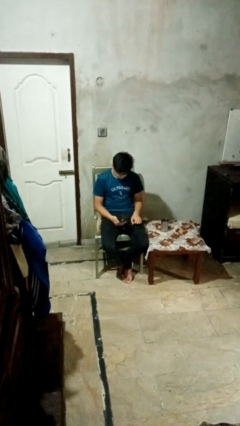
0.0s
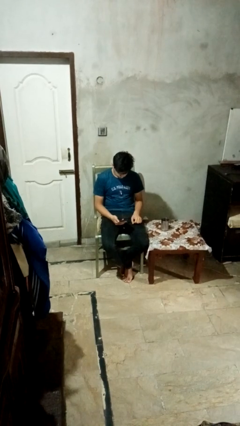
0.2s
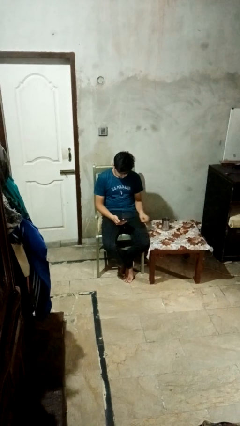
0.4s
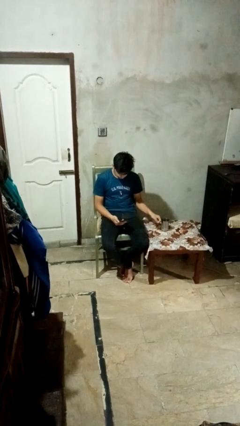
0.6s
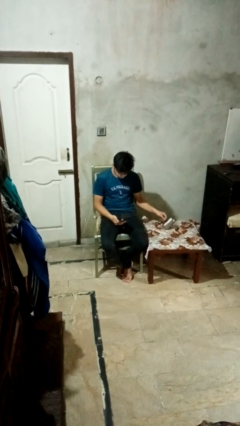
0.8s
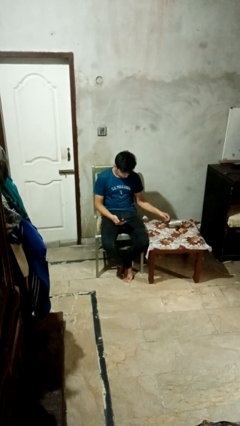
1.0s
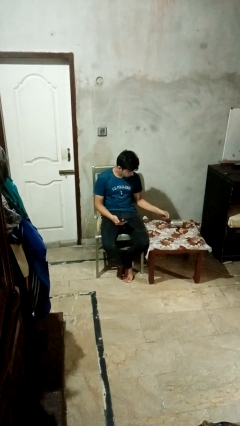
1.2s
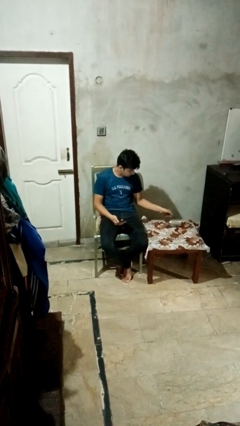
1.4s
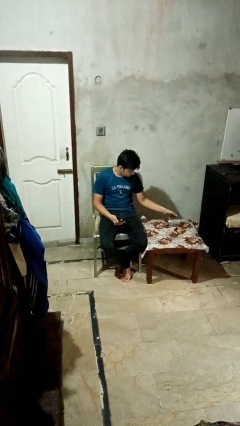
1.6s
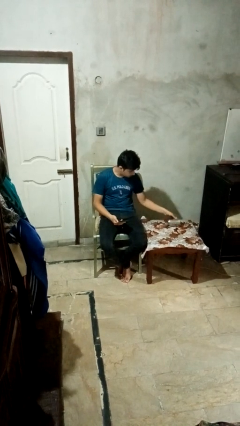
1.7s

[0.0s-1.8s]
person knocks over glass

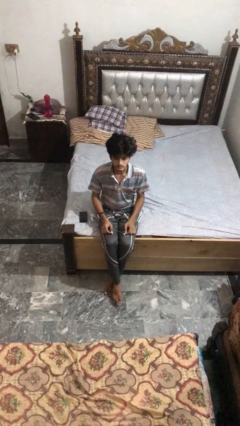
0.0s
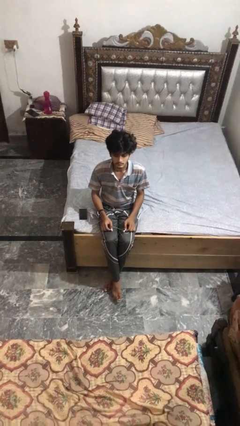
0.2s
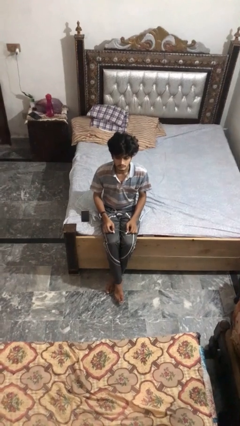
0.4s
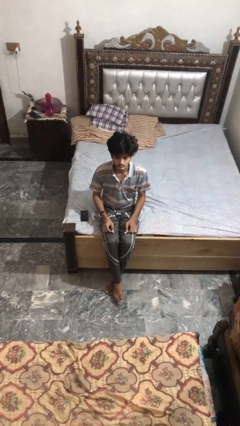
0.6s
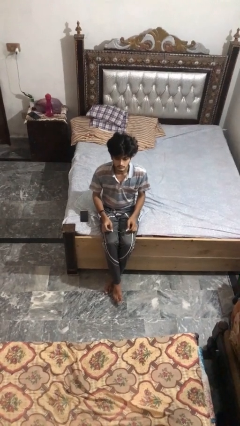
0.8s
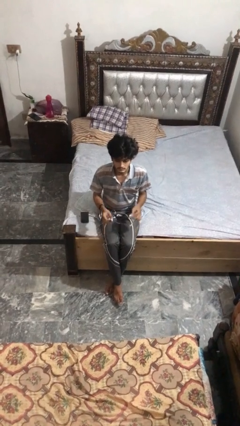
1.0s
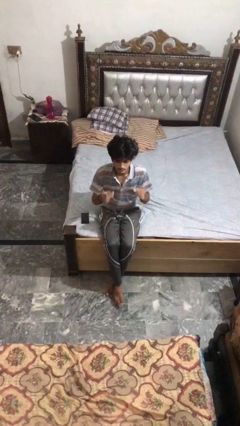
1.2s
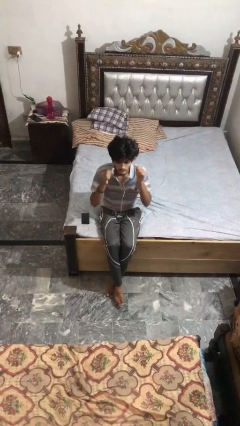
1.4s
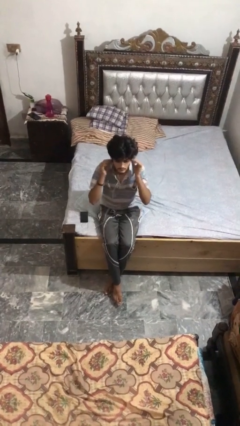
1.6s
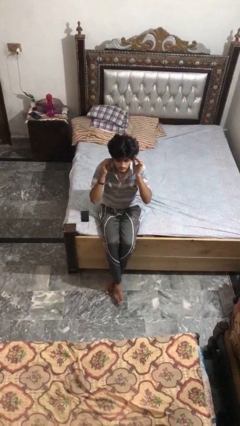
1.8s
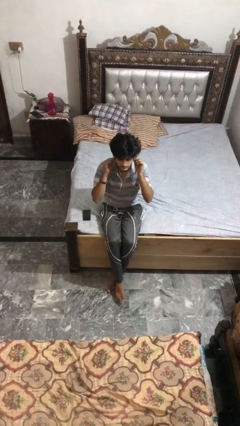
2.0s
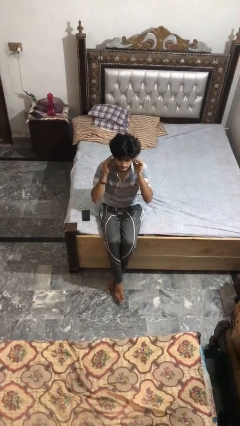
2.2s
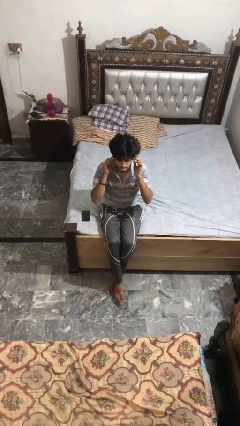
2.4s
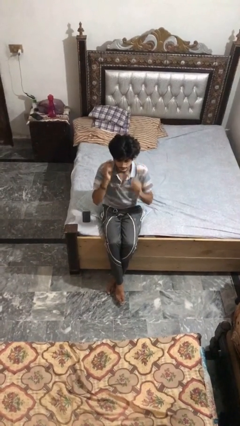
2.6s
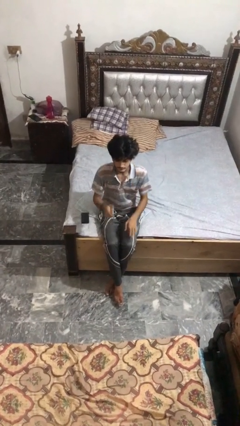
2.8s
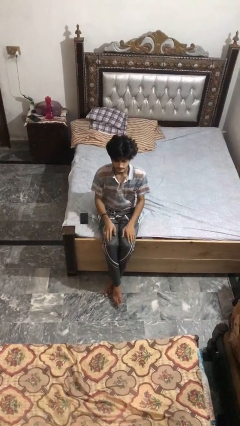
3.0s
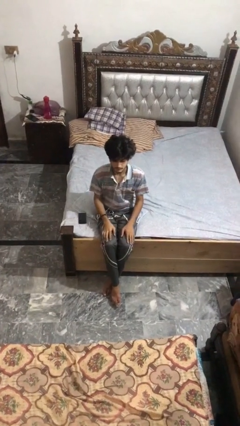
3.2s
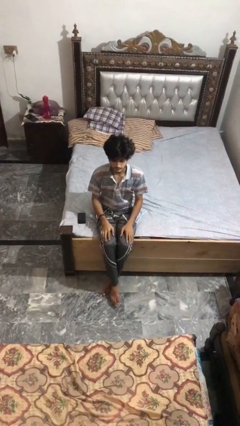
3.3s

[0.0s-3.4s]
person puts on headphones

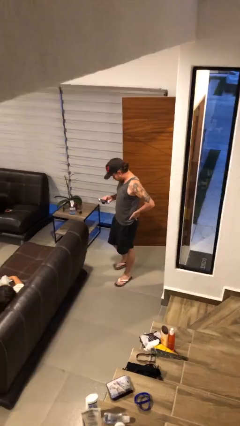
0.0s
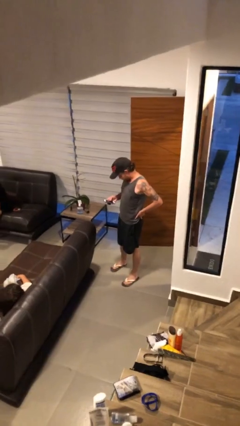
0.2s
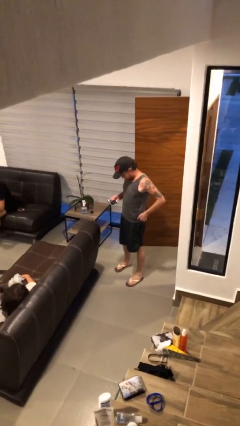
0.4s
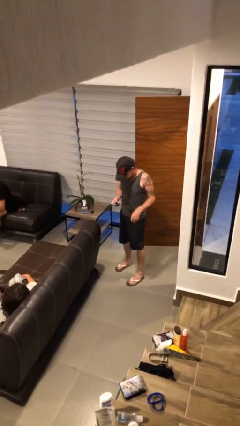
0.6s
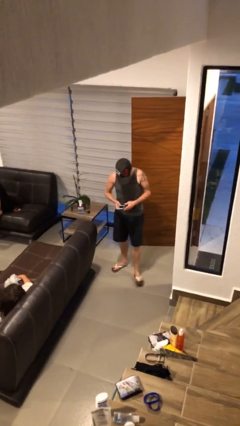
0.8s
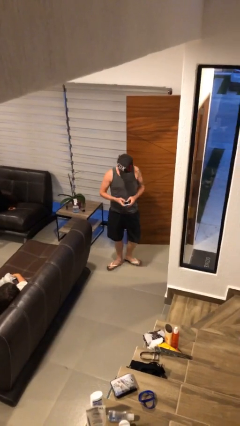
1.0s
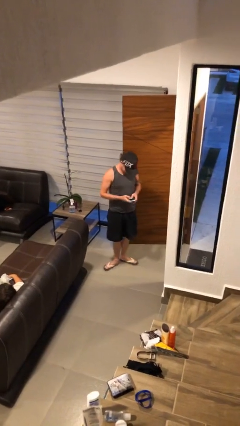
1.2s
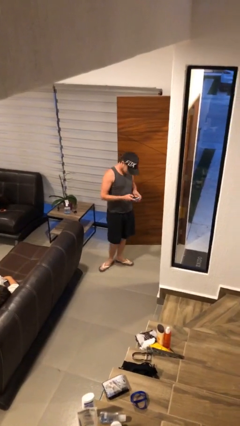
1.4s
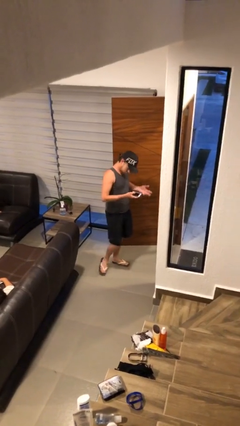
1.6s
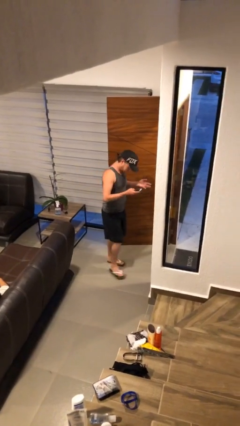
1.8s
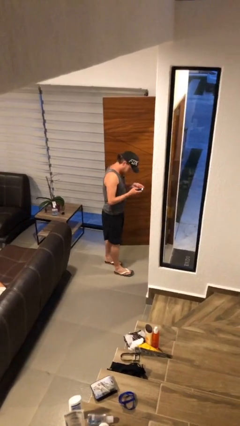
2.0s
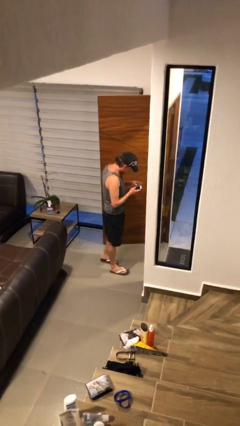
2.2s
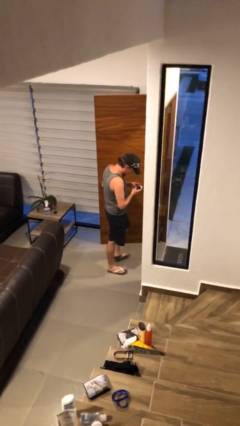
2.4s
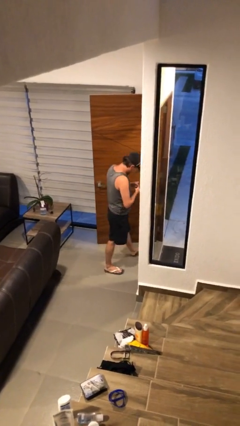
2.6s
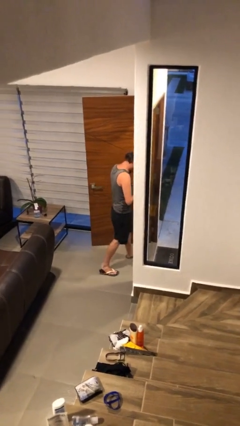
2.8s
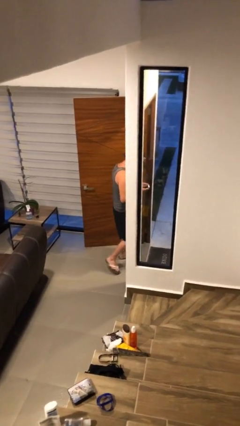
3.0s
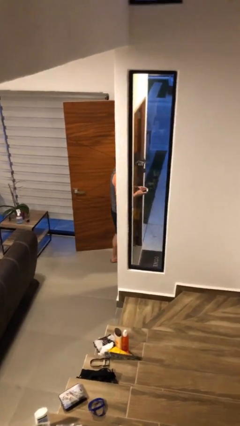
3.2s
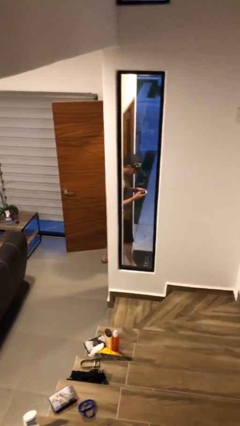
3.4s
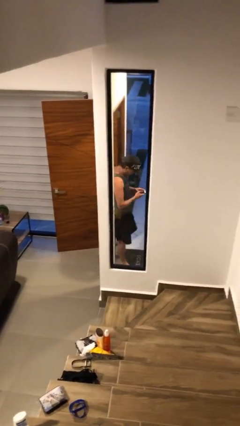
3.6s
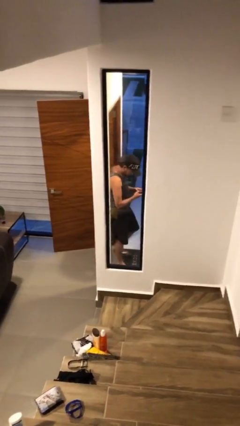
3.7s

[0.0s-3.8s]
person exits scene through structure

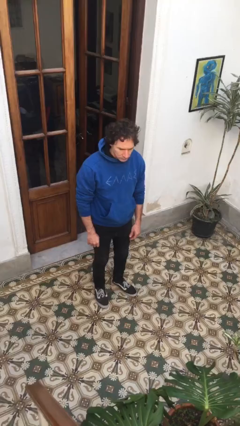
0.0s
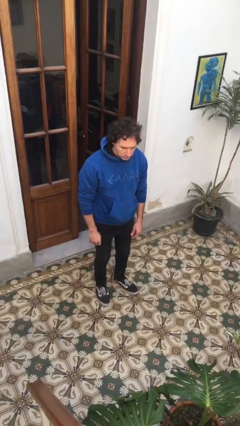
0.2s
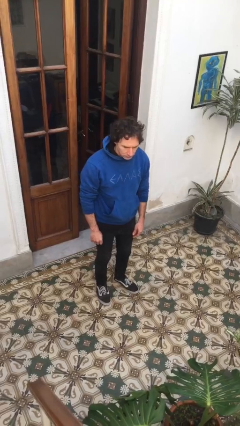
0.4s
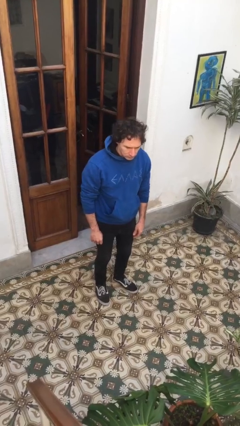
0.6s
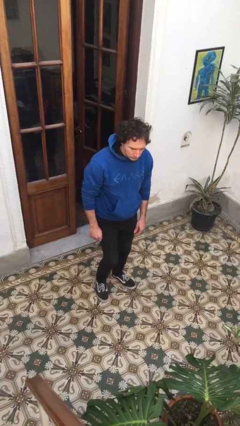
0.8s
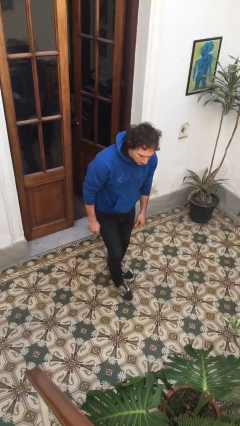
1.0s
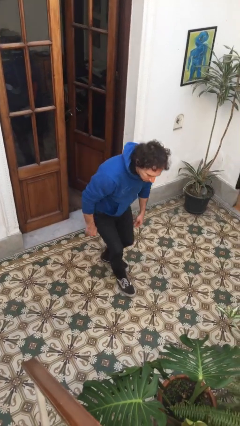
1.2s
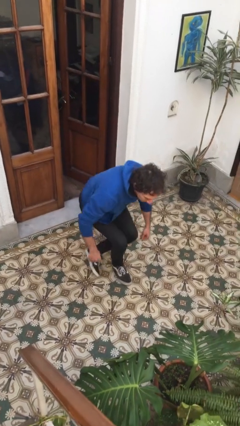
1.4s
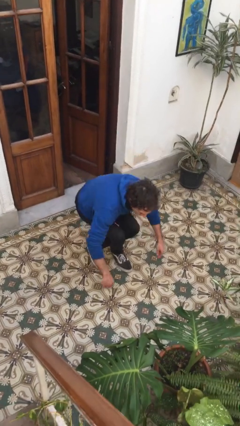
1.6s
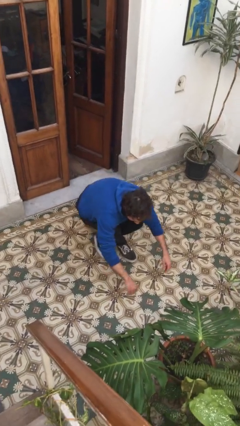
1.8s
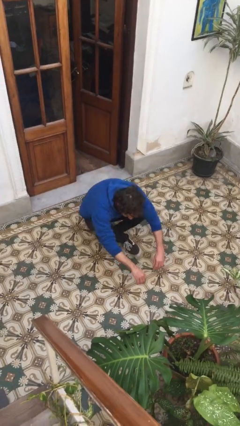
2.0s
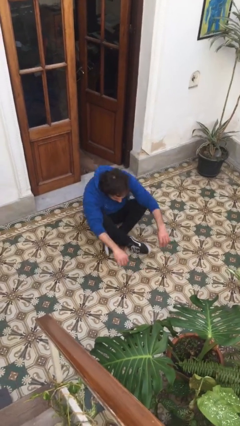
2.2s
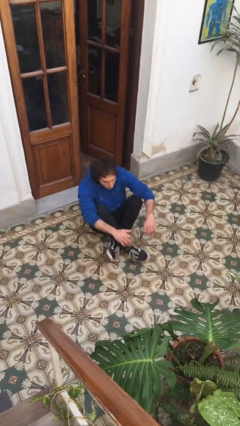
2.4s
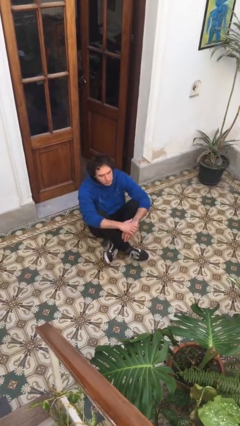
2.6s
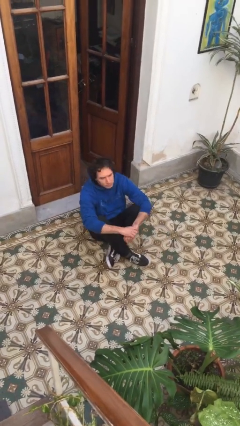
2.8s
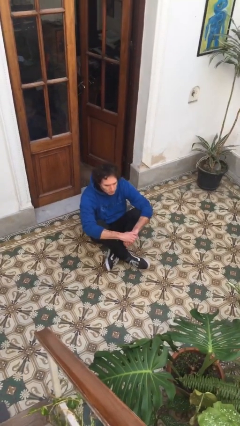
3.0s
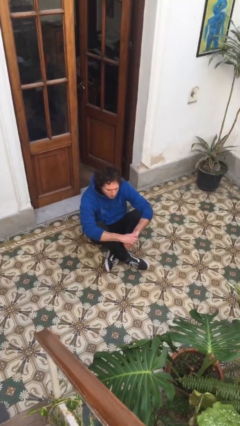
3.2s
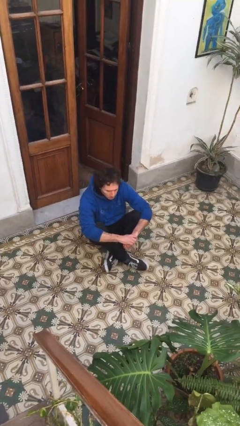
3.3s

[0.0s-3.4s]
person sits crisscross

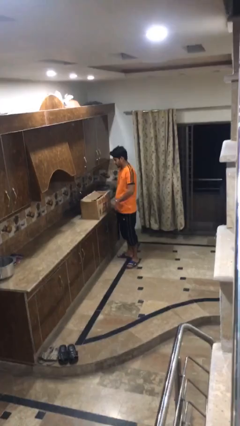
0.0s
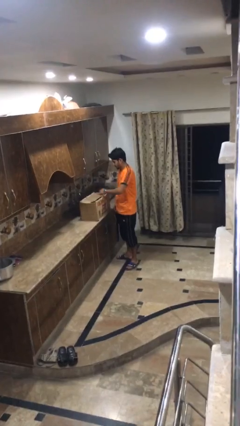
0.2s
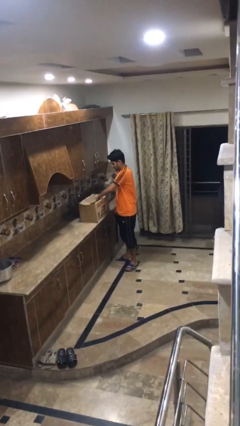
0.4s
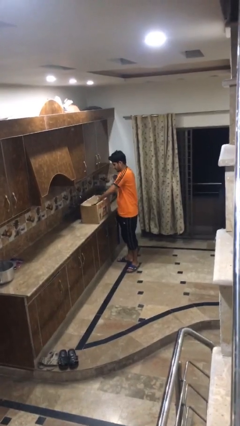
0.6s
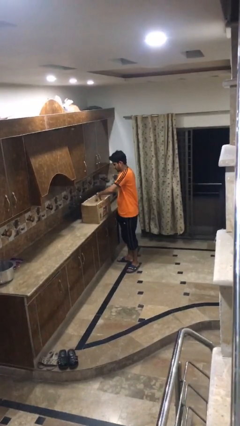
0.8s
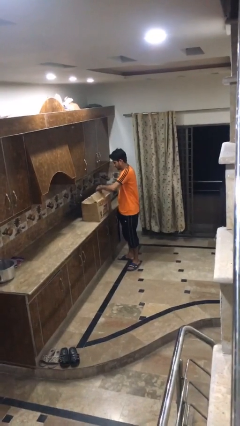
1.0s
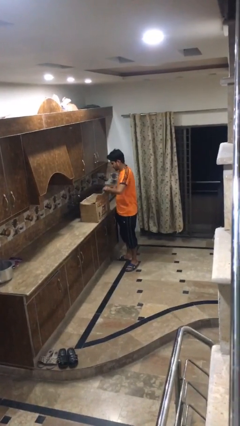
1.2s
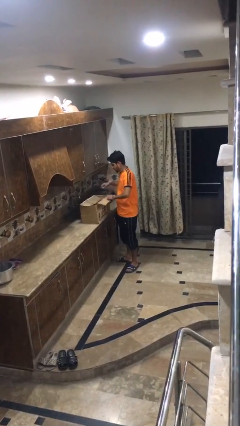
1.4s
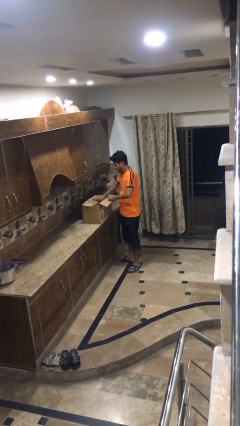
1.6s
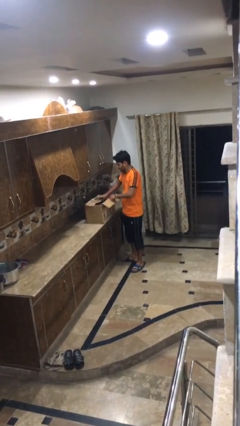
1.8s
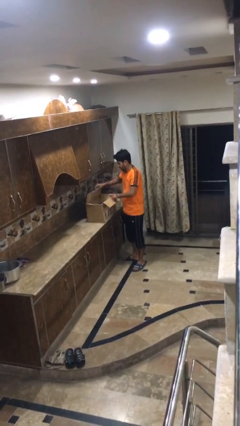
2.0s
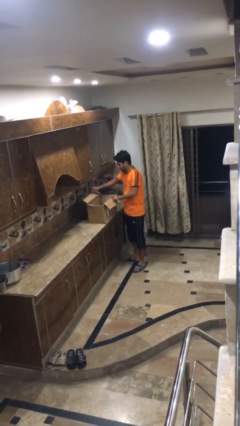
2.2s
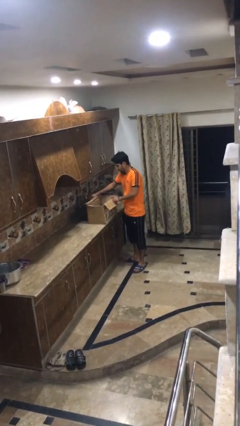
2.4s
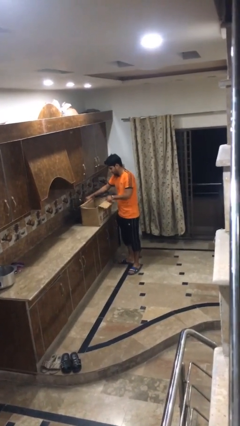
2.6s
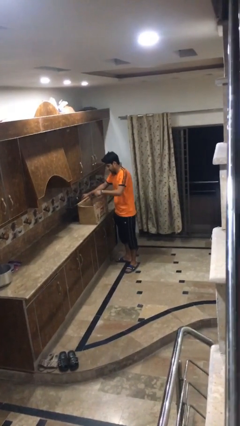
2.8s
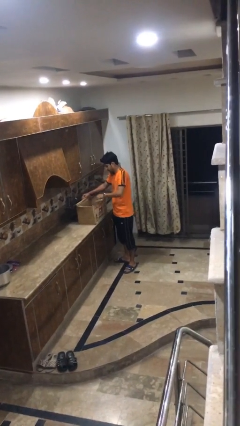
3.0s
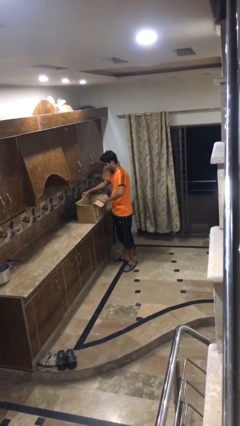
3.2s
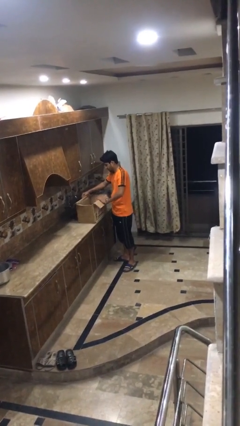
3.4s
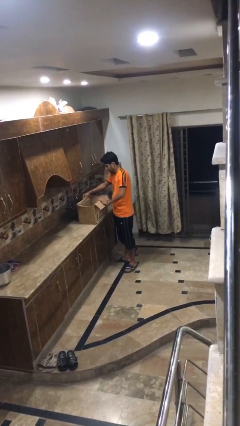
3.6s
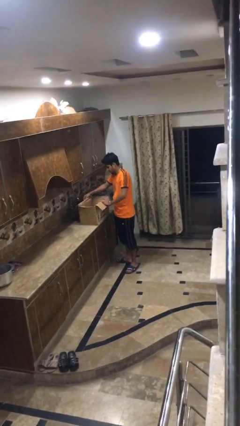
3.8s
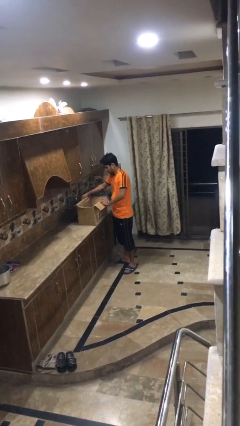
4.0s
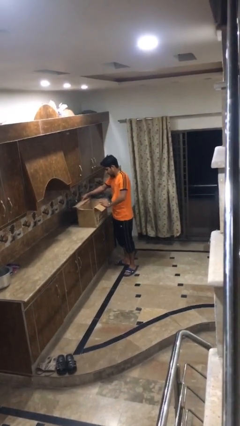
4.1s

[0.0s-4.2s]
person opens box

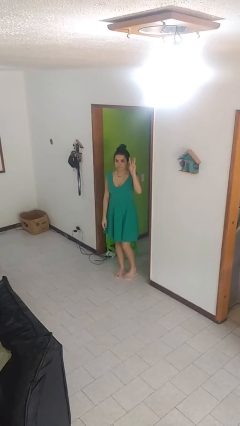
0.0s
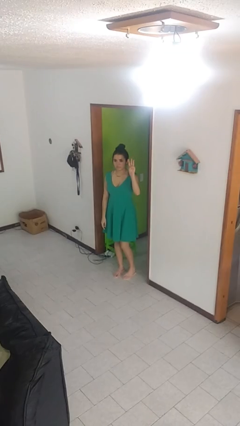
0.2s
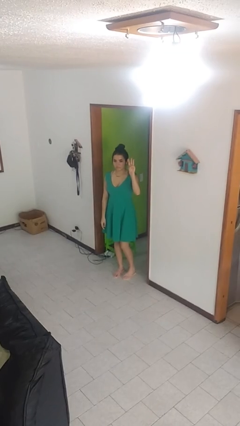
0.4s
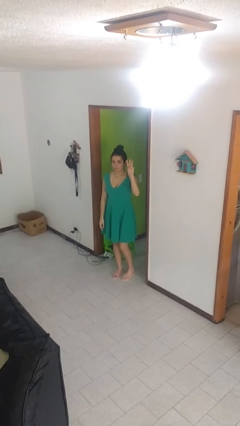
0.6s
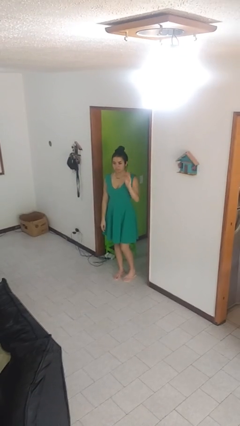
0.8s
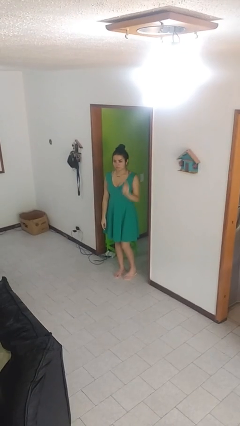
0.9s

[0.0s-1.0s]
person gestures number three
